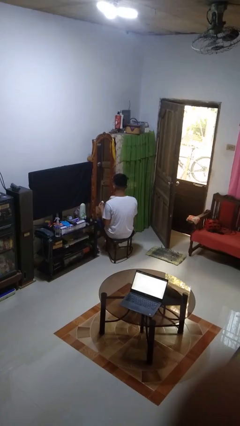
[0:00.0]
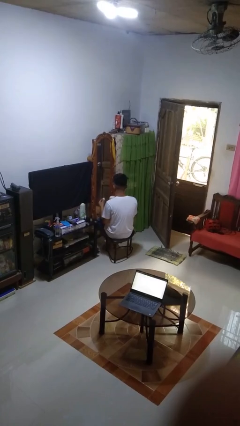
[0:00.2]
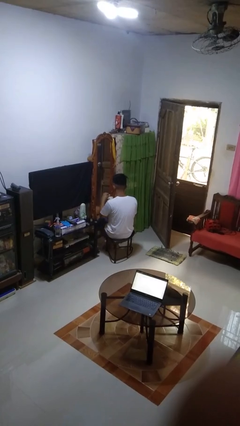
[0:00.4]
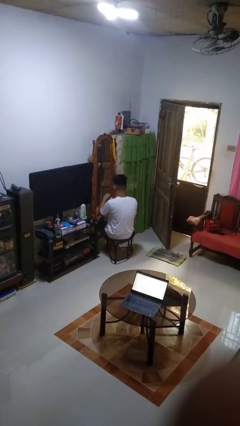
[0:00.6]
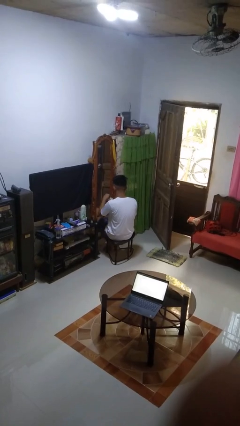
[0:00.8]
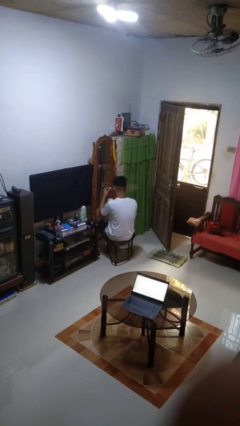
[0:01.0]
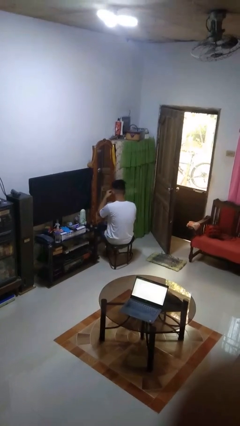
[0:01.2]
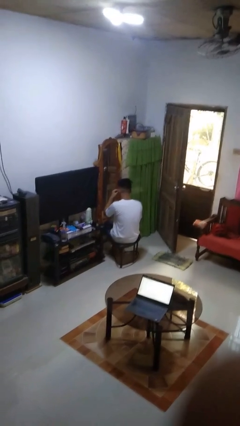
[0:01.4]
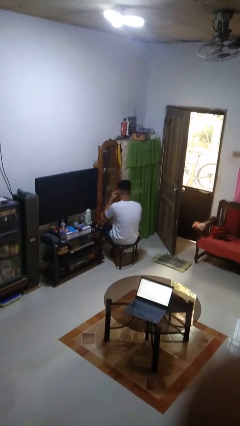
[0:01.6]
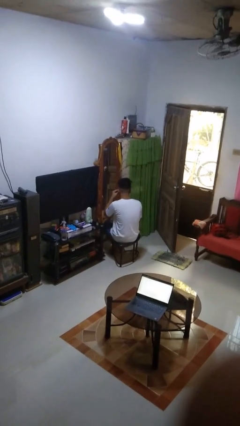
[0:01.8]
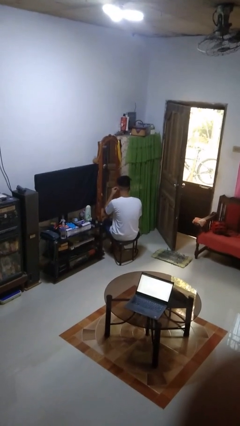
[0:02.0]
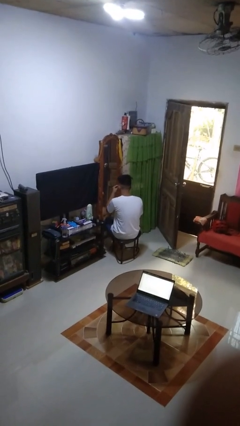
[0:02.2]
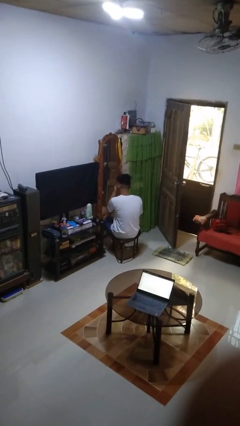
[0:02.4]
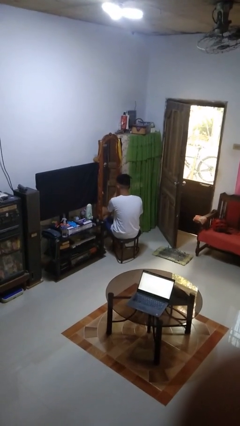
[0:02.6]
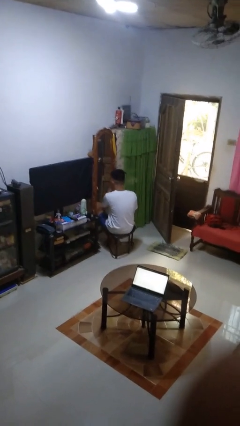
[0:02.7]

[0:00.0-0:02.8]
person applies foundation makeup

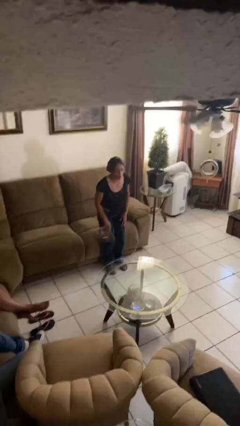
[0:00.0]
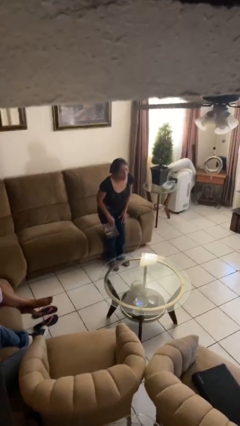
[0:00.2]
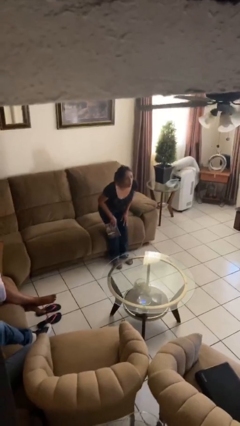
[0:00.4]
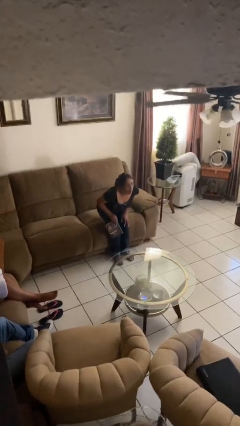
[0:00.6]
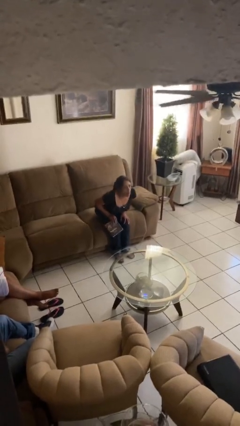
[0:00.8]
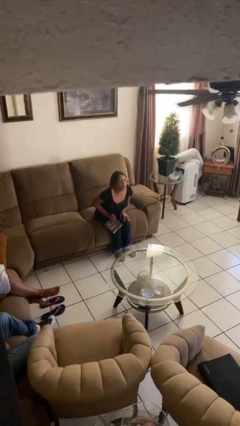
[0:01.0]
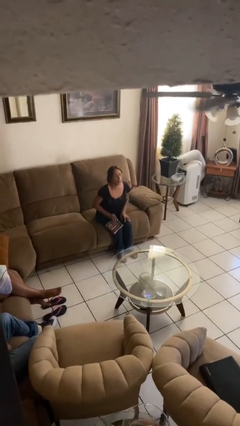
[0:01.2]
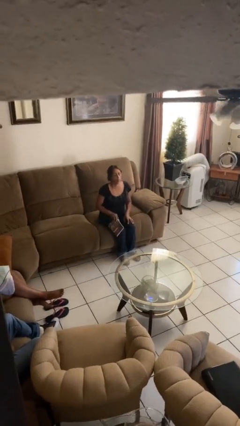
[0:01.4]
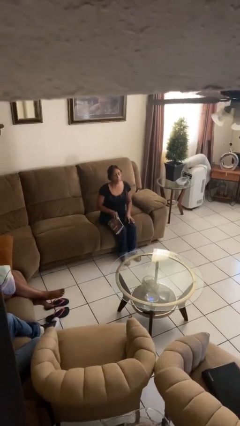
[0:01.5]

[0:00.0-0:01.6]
person sits down

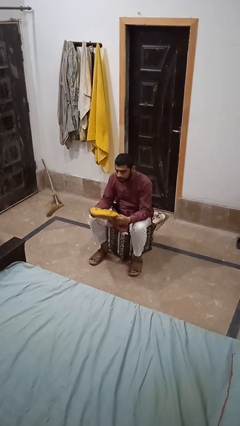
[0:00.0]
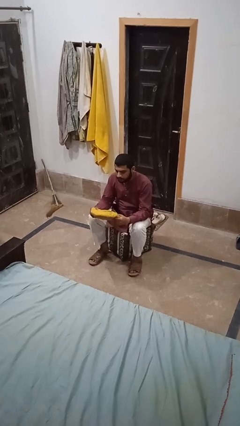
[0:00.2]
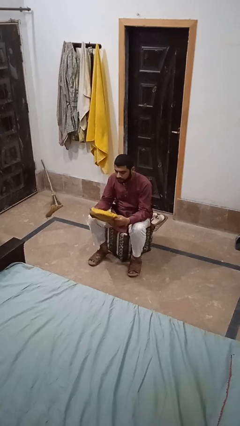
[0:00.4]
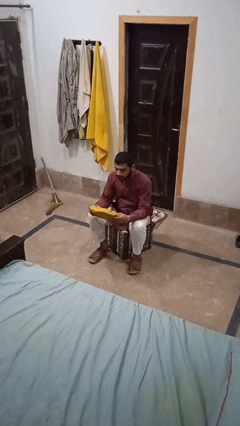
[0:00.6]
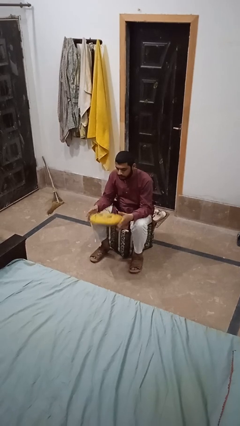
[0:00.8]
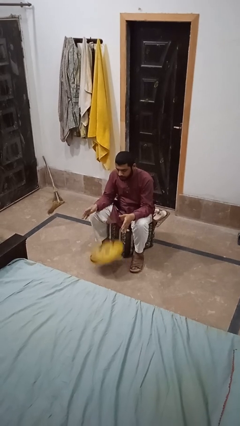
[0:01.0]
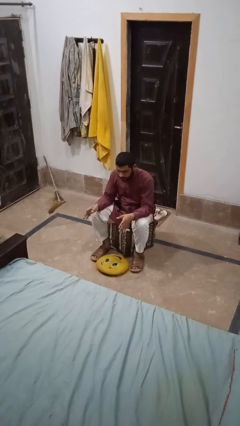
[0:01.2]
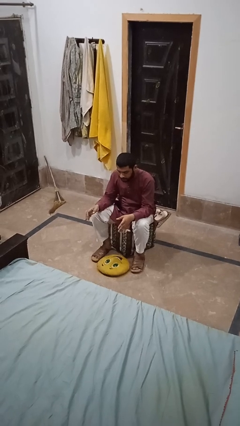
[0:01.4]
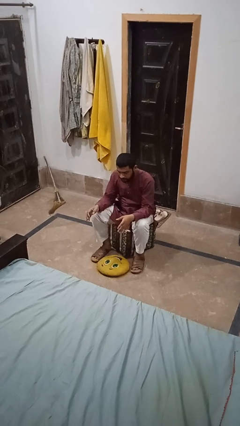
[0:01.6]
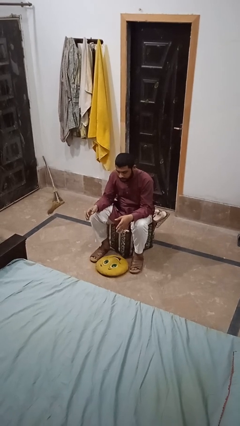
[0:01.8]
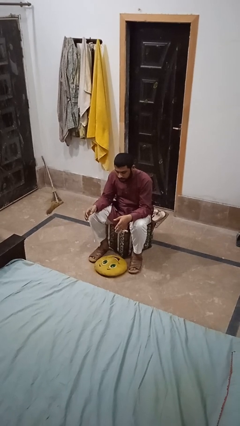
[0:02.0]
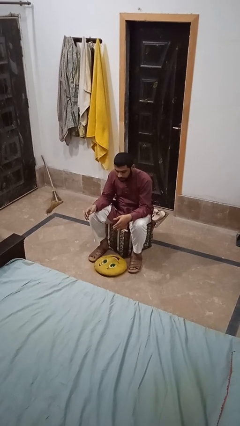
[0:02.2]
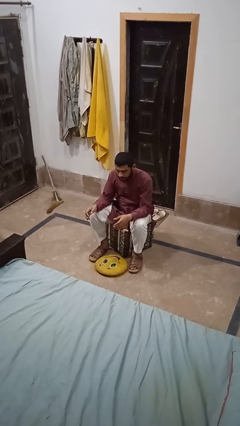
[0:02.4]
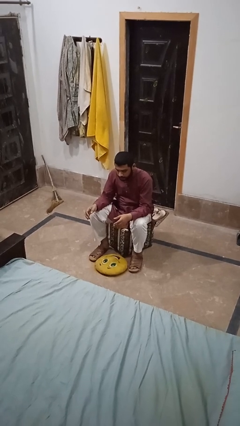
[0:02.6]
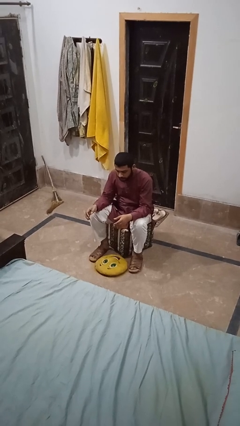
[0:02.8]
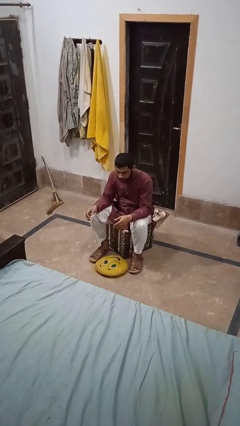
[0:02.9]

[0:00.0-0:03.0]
person drops object

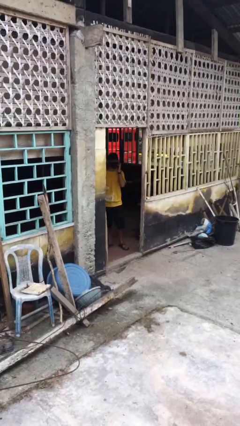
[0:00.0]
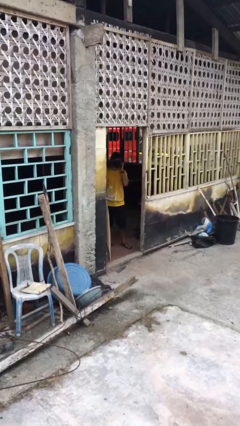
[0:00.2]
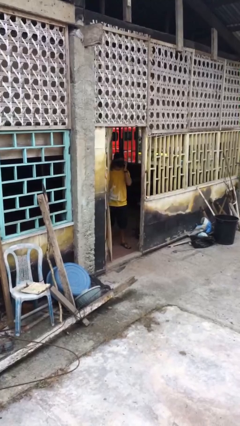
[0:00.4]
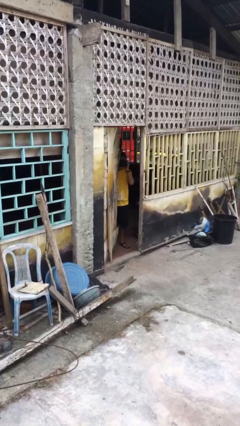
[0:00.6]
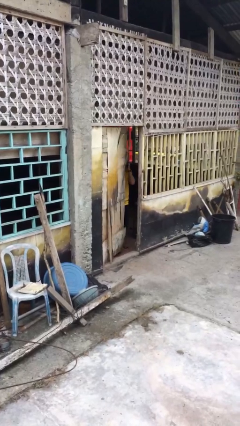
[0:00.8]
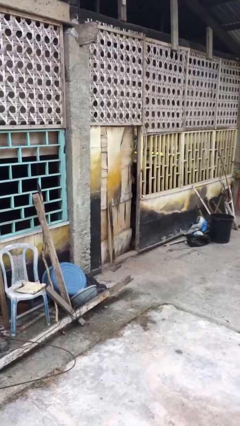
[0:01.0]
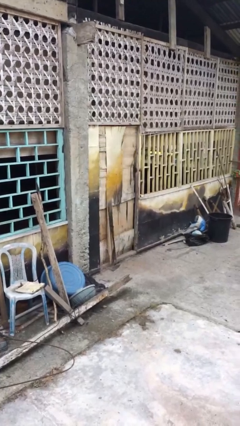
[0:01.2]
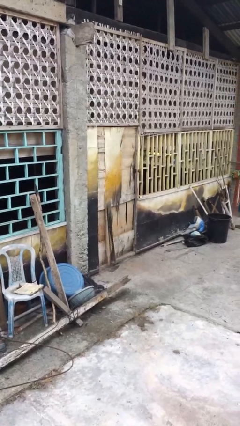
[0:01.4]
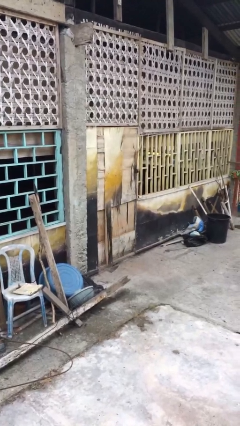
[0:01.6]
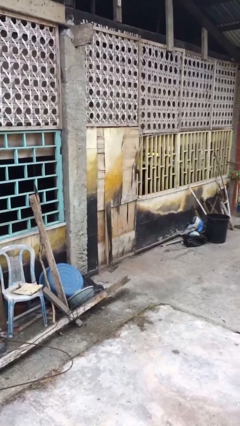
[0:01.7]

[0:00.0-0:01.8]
person closes facility door

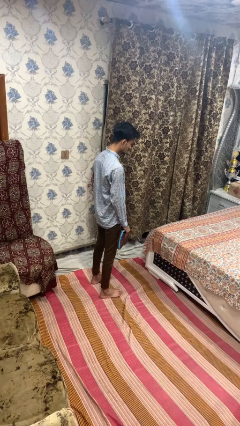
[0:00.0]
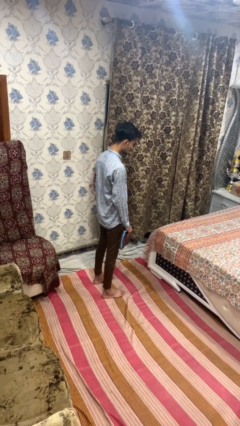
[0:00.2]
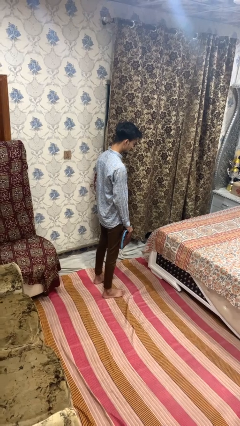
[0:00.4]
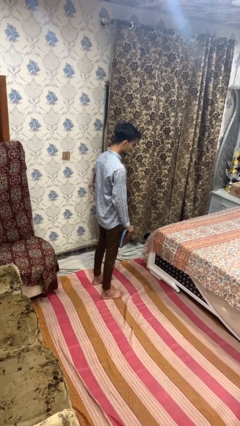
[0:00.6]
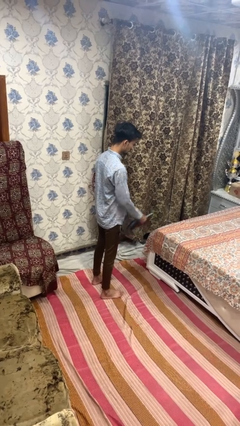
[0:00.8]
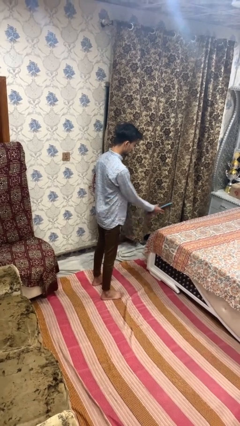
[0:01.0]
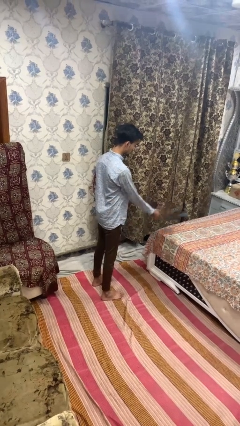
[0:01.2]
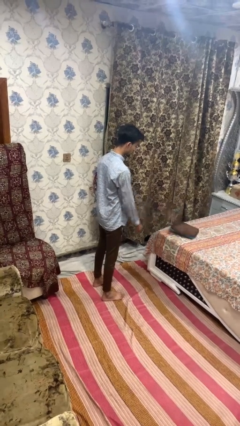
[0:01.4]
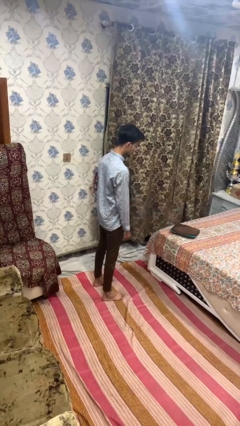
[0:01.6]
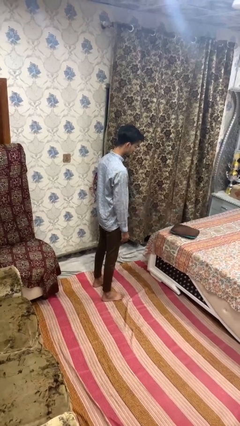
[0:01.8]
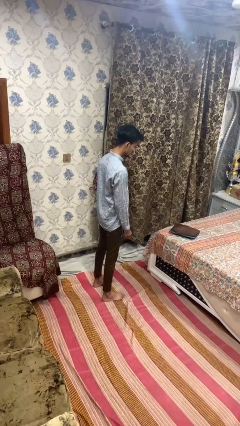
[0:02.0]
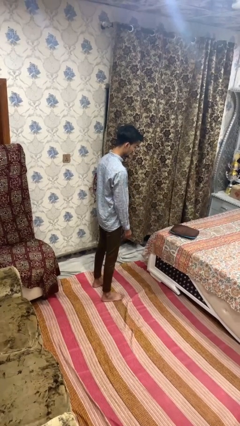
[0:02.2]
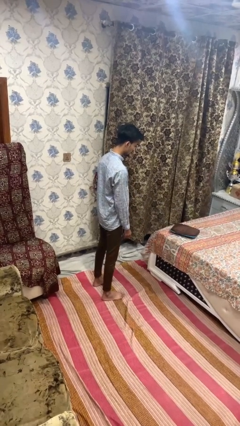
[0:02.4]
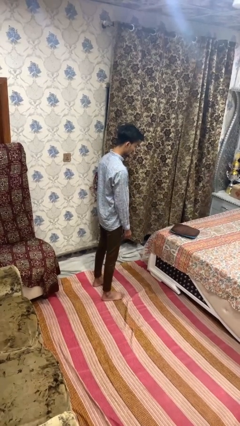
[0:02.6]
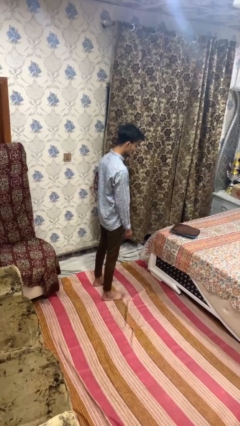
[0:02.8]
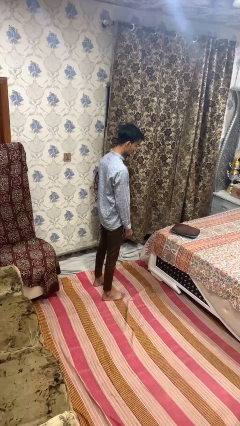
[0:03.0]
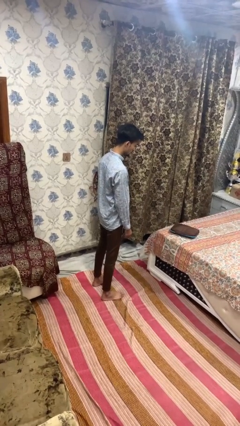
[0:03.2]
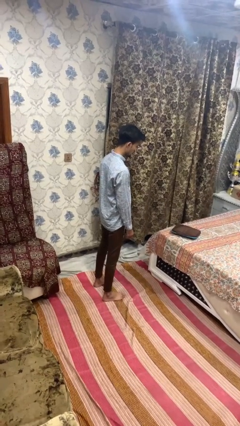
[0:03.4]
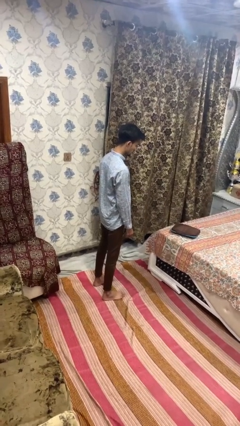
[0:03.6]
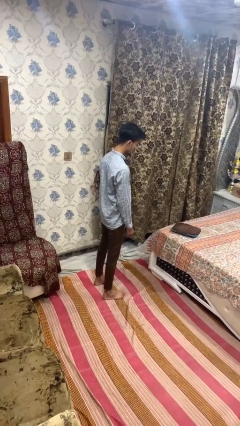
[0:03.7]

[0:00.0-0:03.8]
person throws object on bed

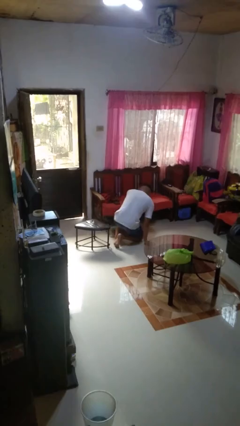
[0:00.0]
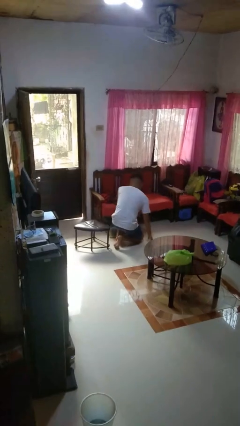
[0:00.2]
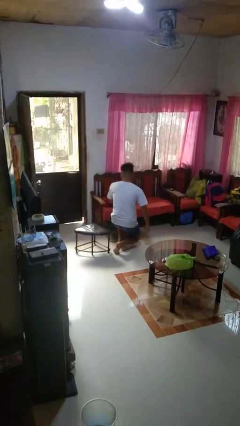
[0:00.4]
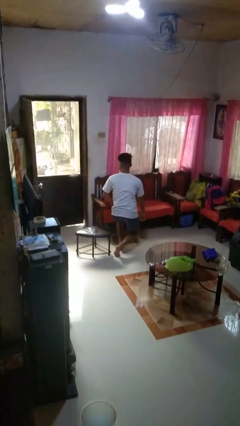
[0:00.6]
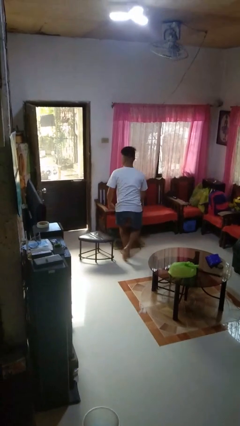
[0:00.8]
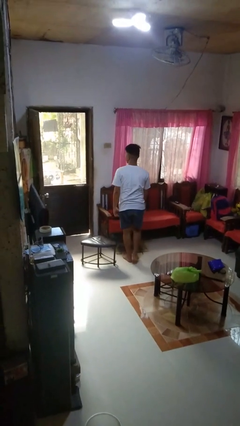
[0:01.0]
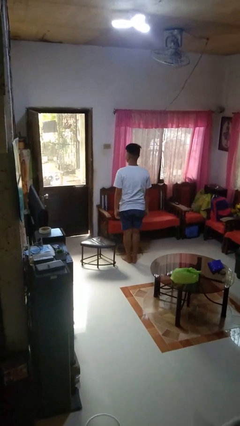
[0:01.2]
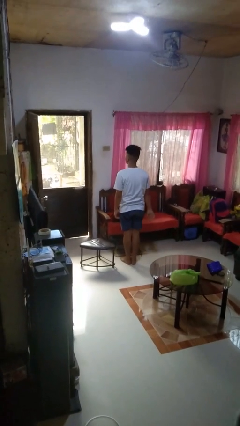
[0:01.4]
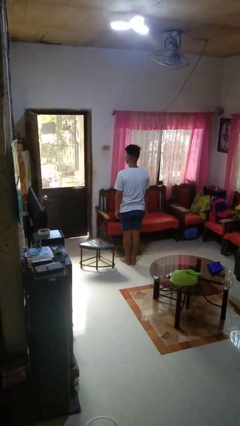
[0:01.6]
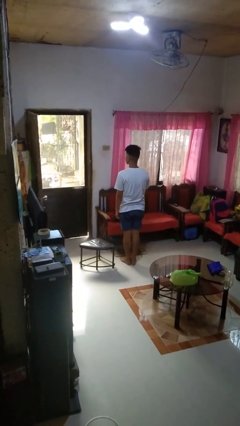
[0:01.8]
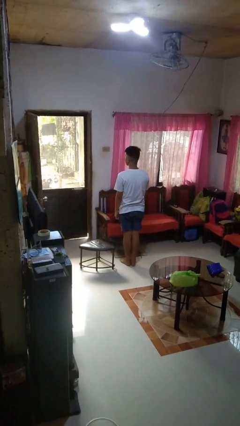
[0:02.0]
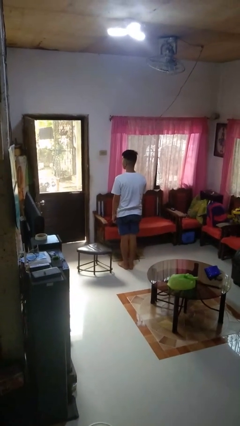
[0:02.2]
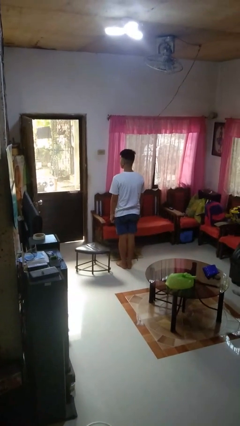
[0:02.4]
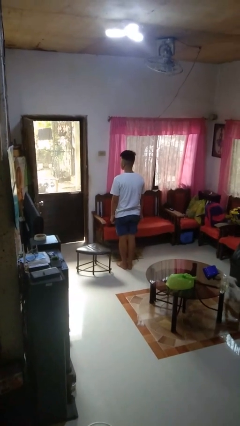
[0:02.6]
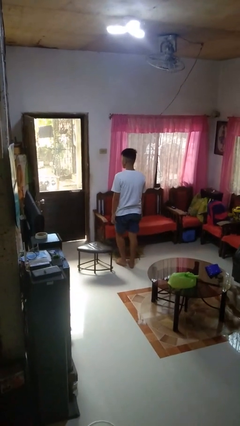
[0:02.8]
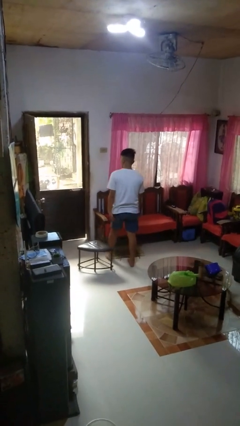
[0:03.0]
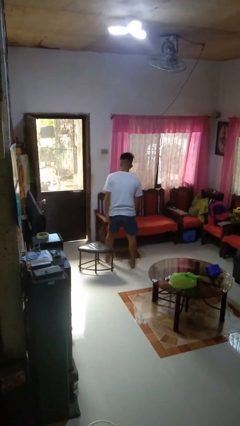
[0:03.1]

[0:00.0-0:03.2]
person stands up from floor

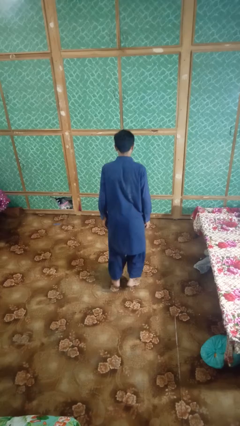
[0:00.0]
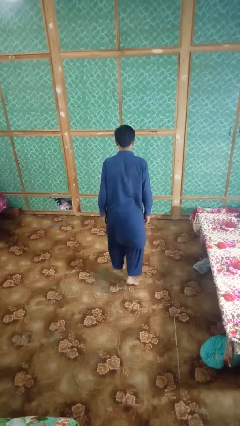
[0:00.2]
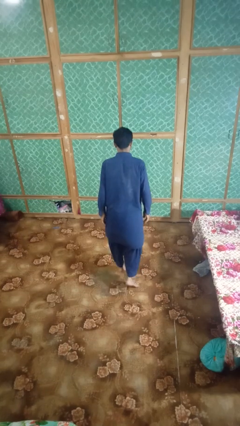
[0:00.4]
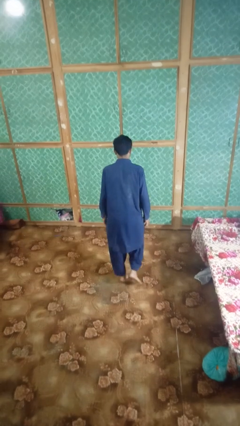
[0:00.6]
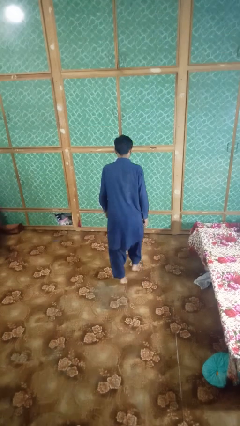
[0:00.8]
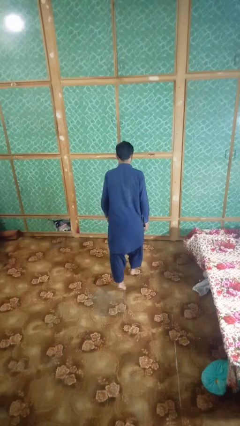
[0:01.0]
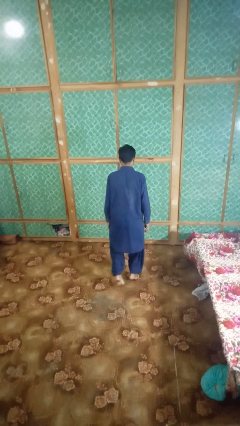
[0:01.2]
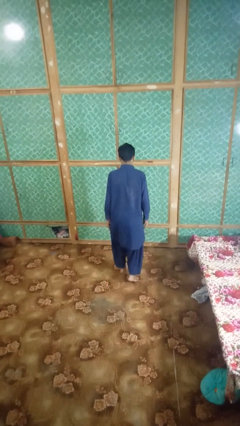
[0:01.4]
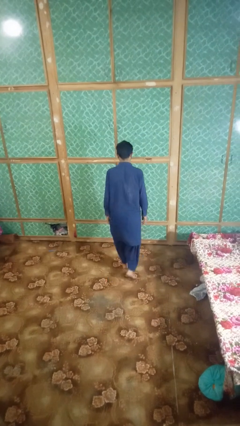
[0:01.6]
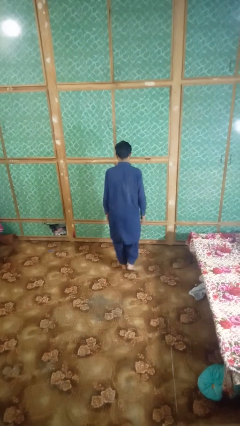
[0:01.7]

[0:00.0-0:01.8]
person walks tiptoe
